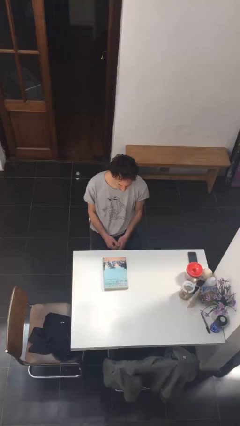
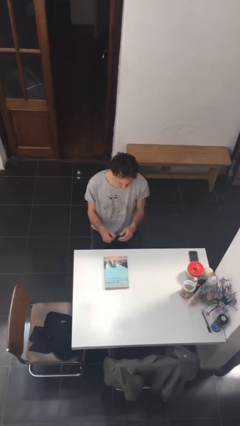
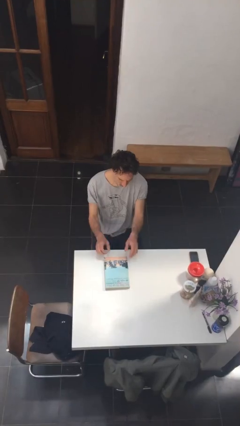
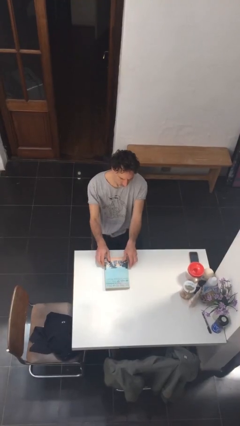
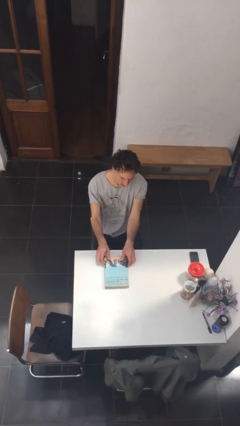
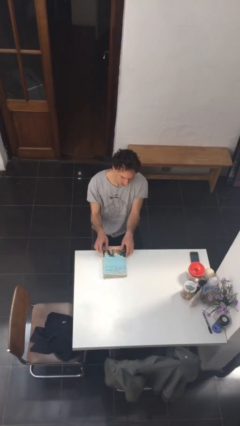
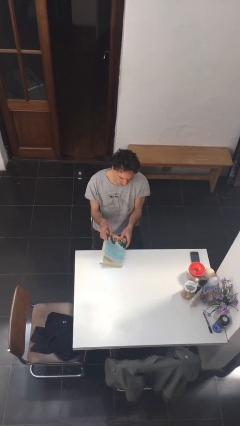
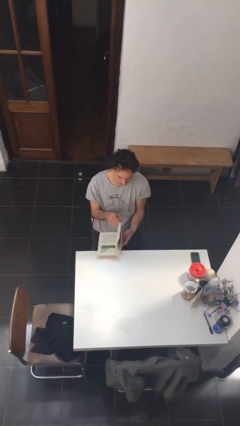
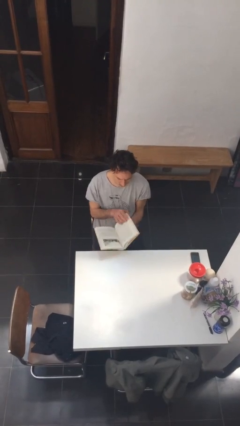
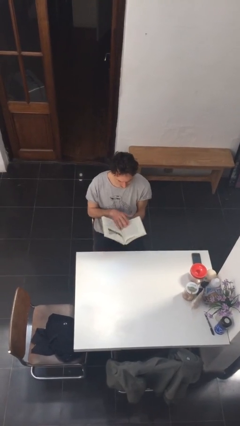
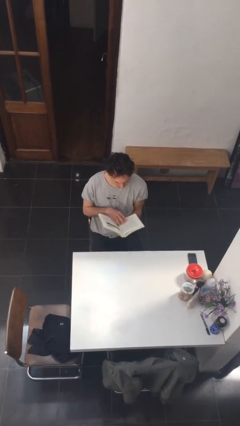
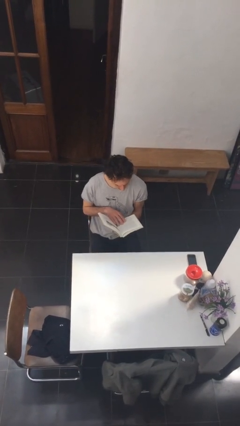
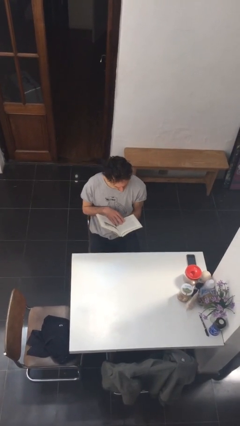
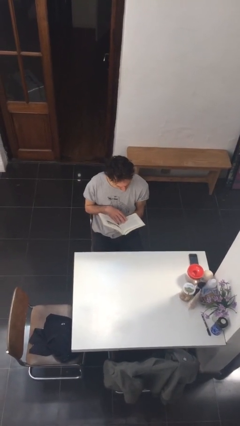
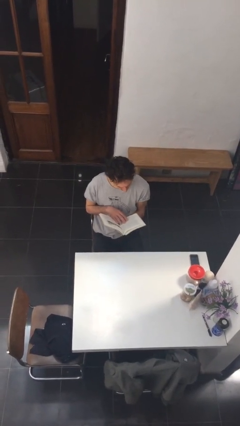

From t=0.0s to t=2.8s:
person picks up object from table

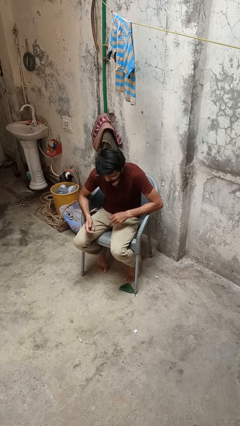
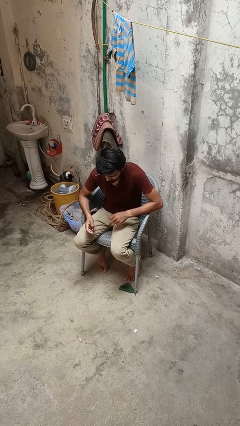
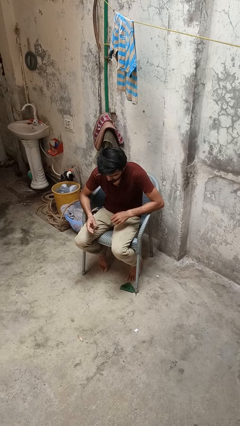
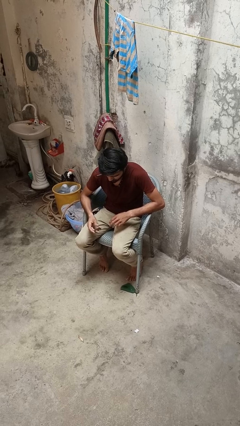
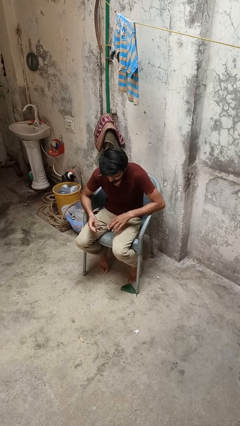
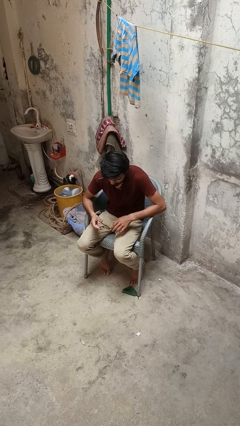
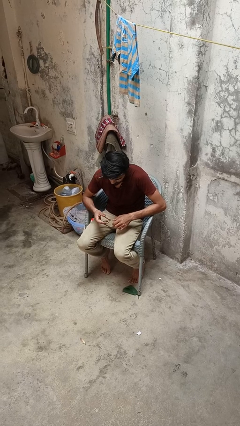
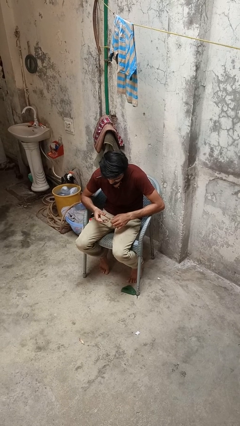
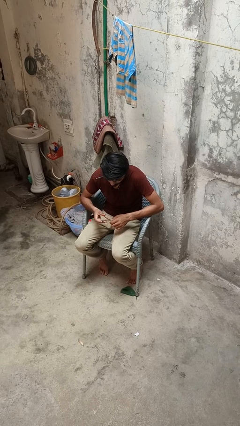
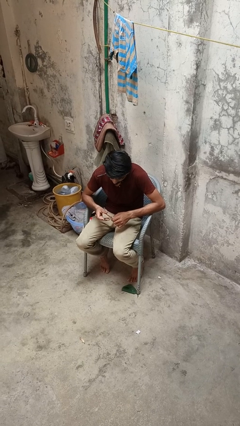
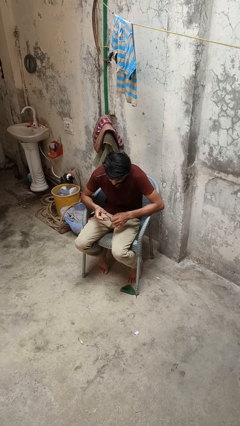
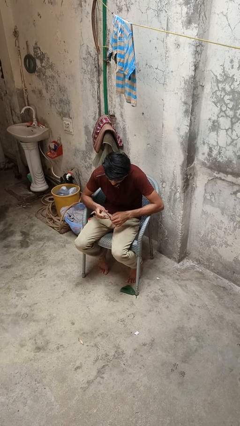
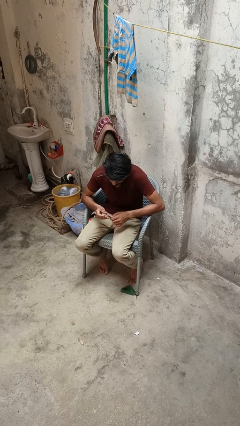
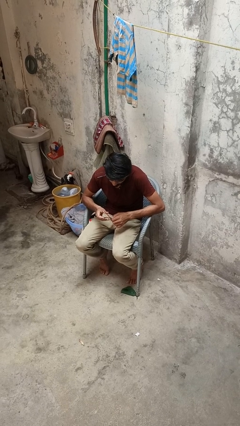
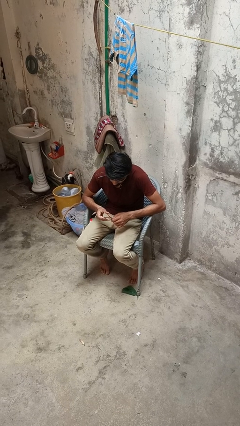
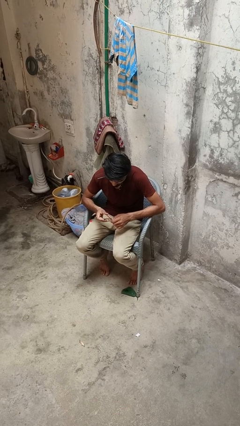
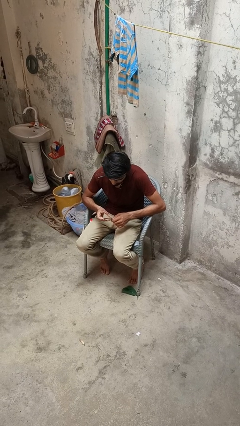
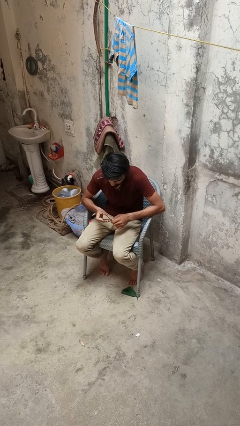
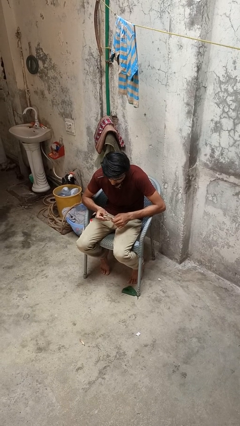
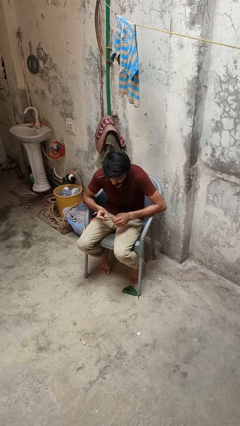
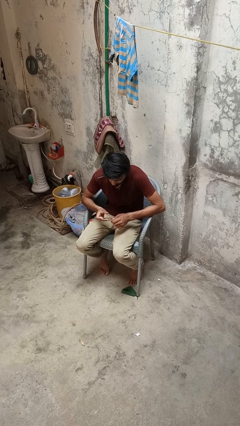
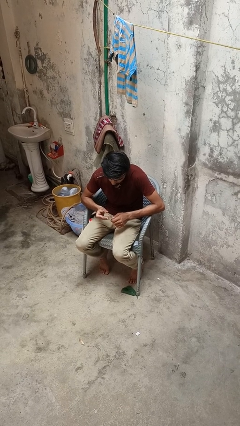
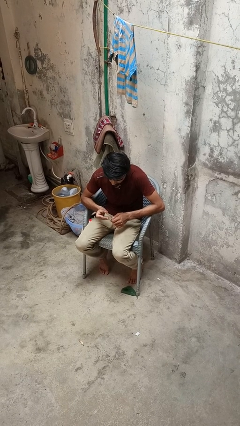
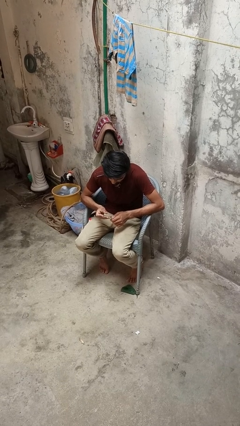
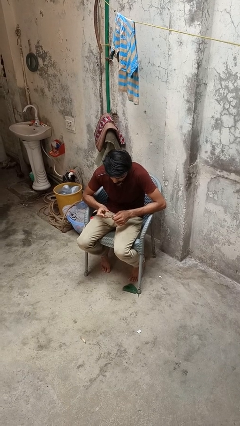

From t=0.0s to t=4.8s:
person clips fingernails

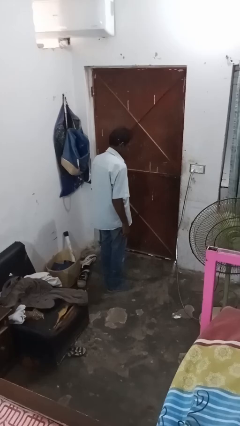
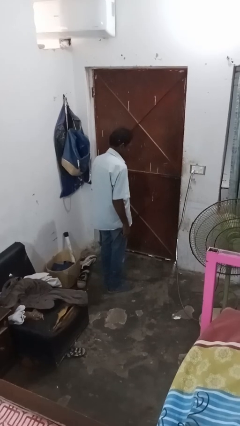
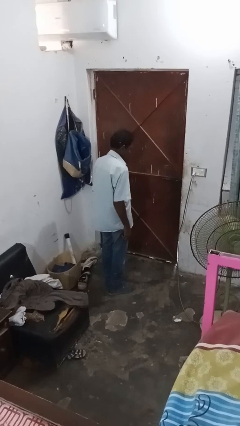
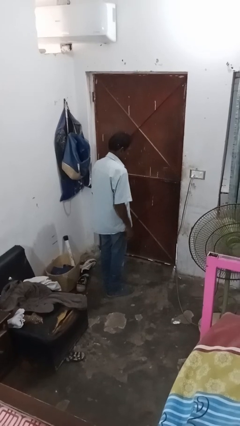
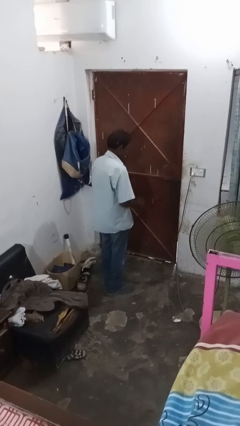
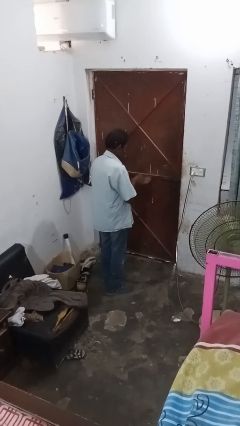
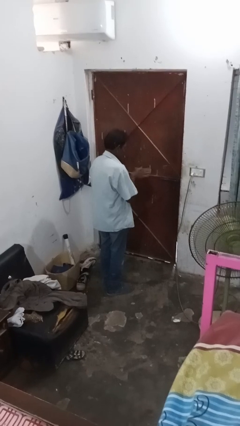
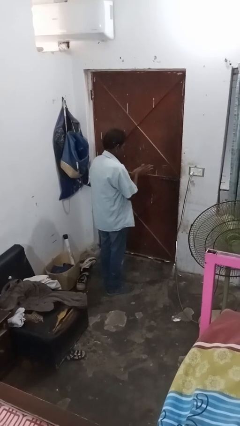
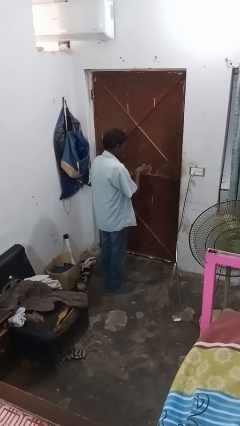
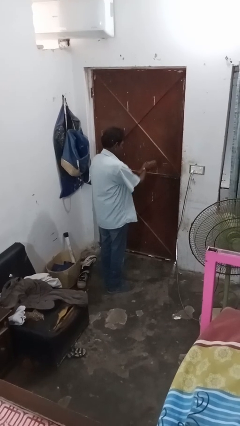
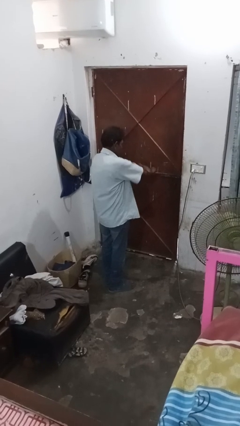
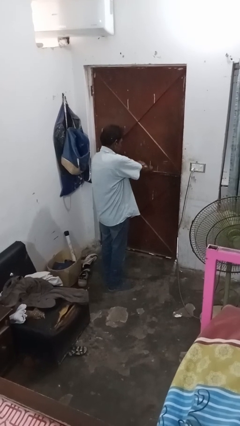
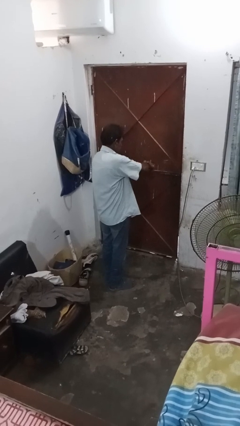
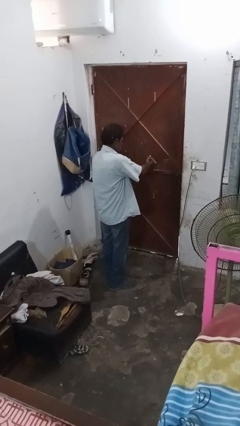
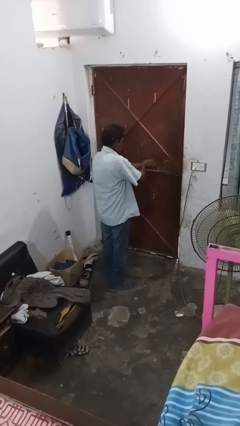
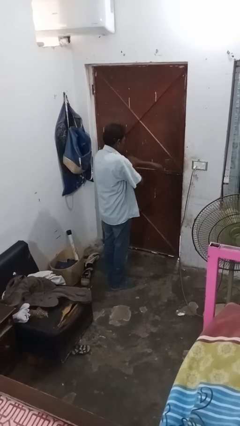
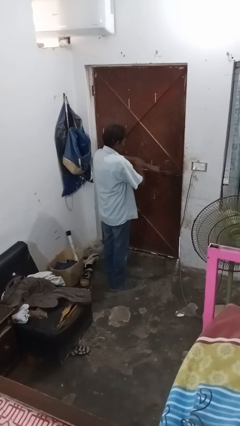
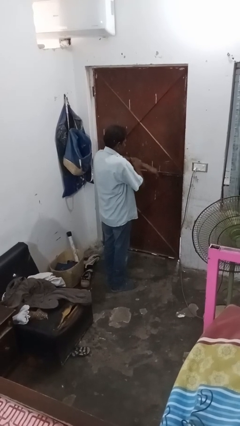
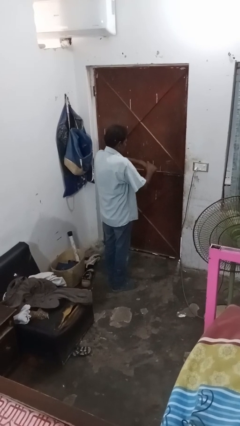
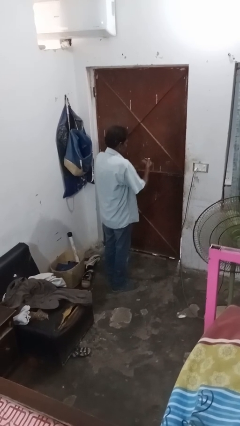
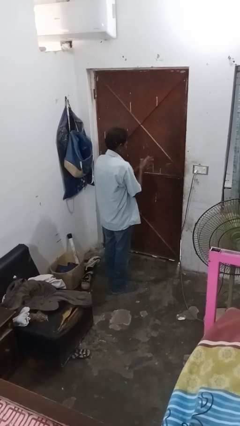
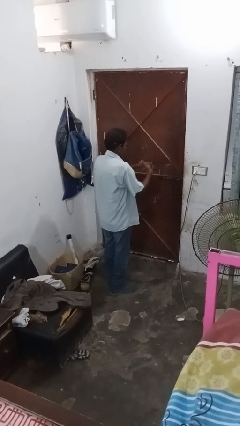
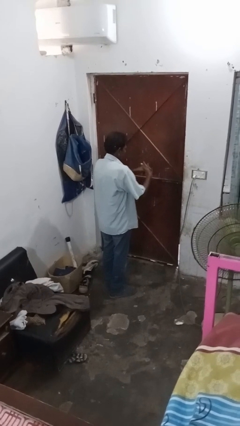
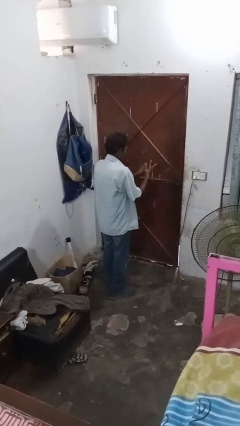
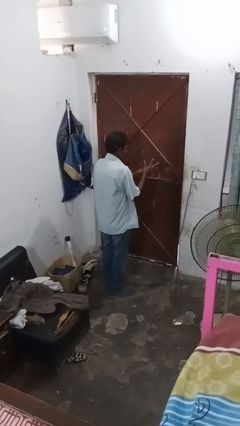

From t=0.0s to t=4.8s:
person applies sunscreen

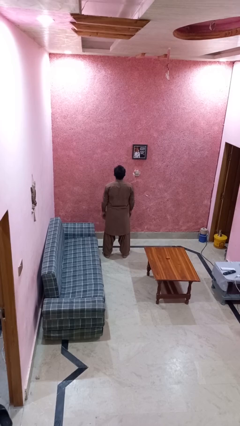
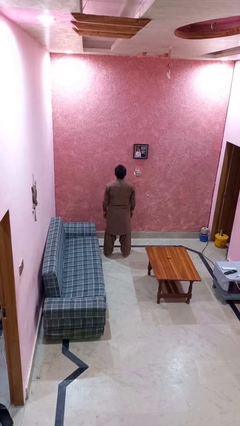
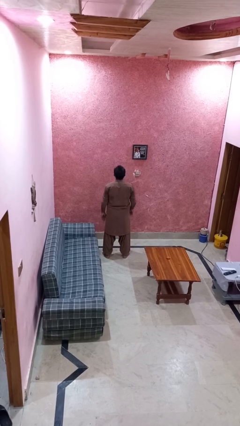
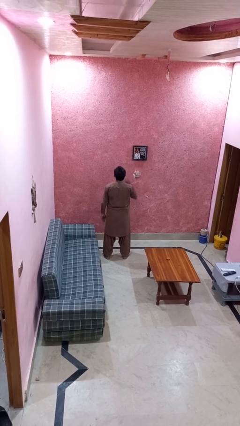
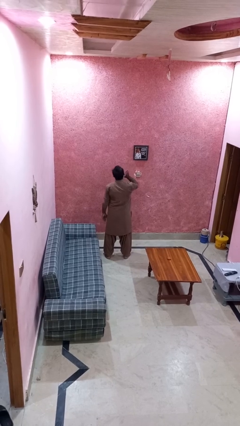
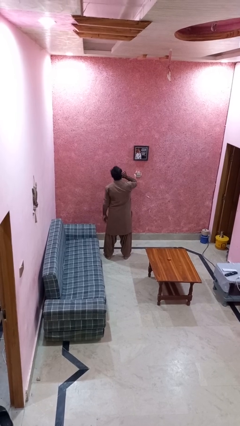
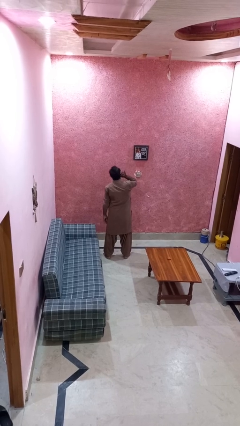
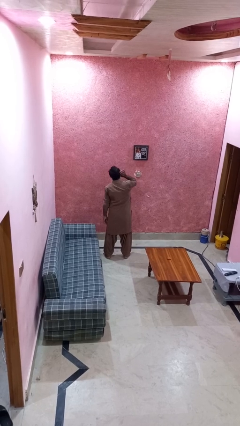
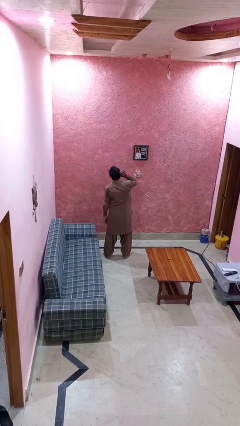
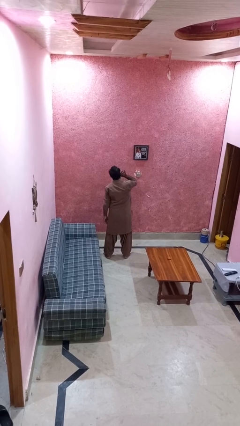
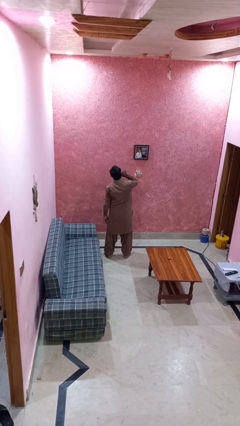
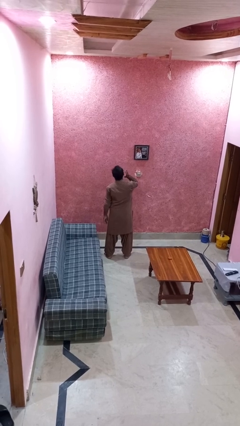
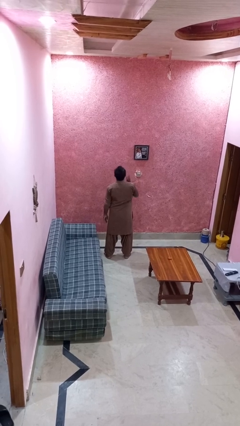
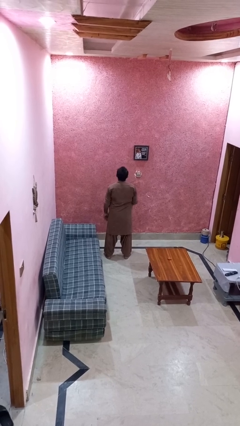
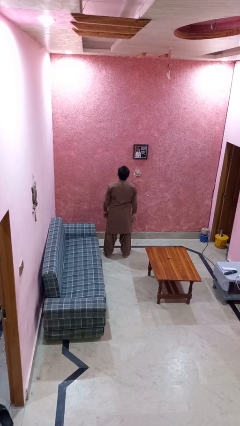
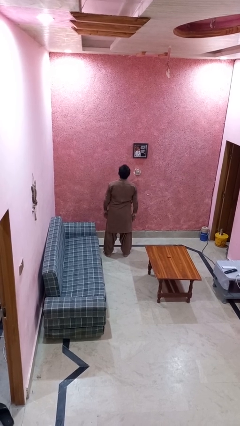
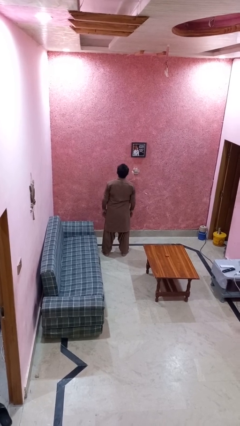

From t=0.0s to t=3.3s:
person gestures listen closely

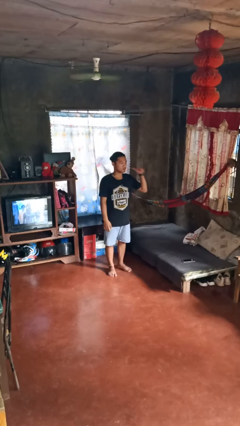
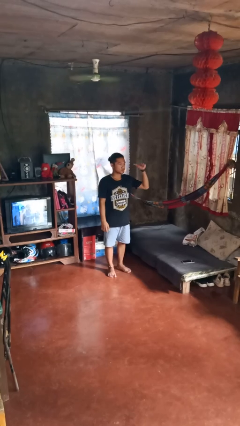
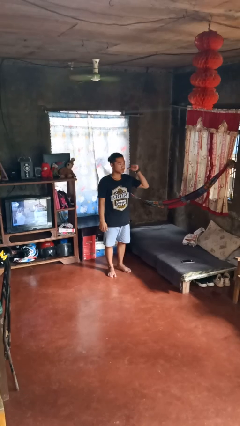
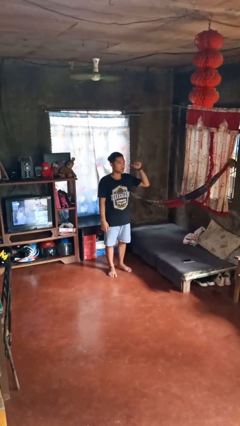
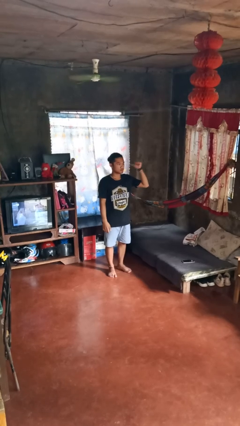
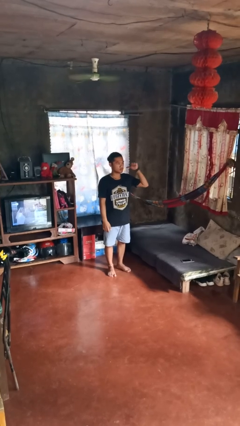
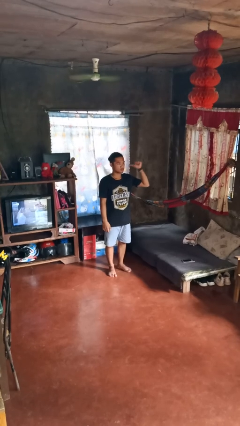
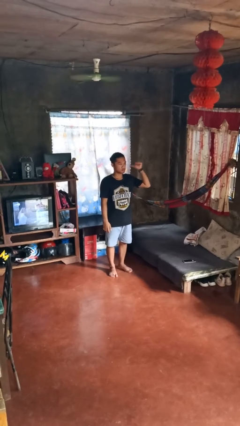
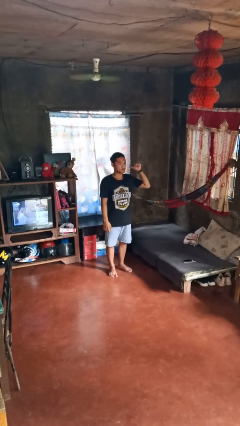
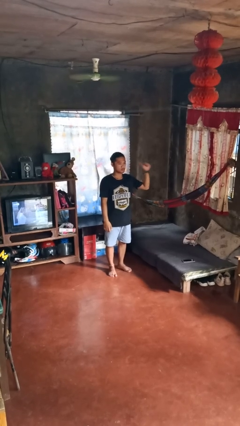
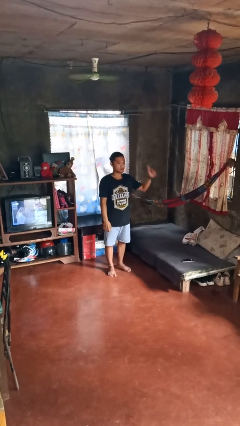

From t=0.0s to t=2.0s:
person gestures behind me
